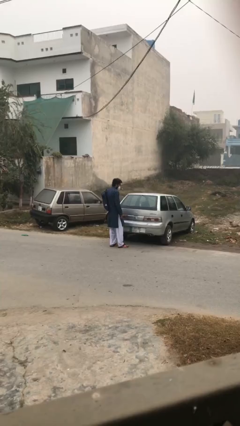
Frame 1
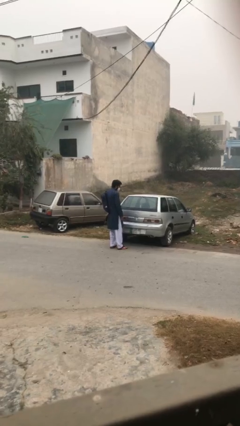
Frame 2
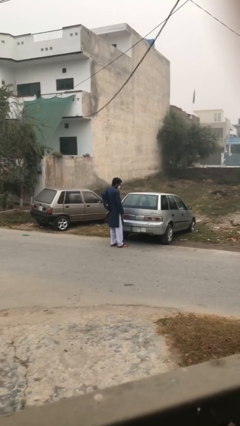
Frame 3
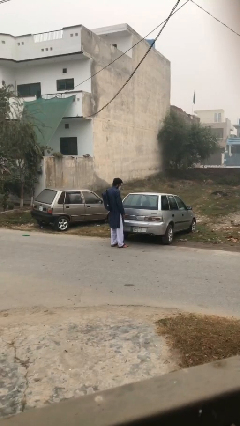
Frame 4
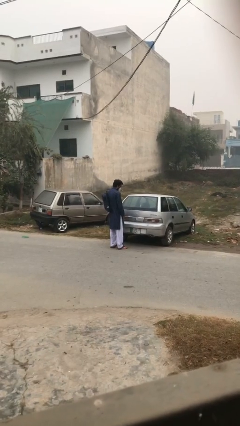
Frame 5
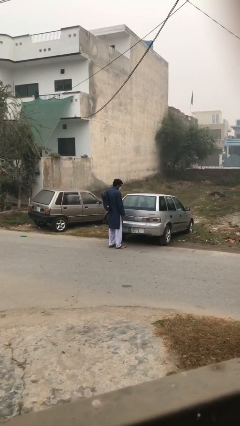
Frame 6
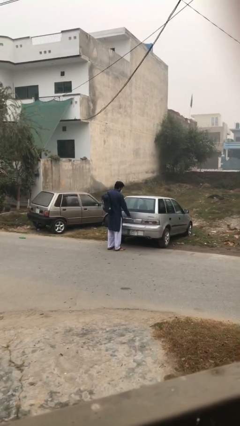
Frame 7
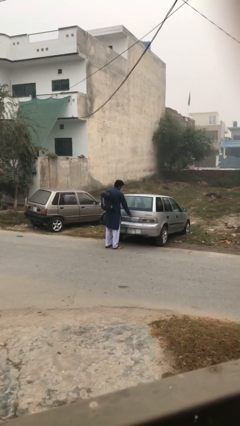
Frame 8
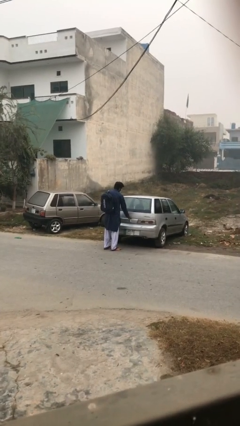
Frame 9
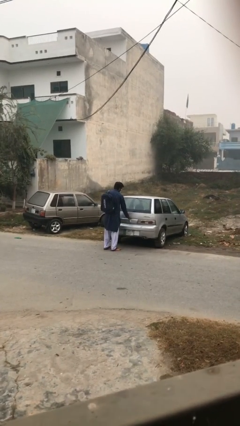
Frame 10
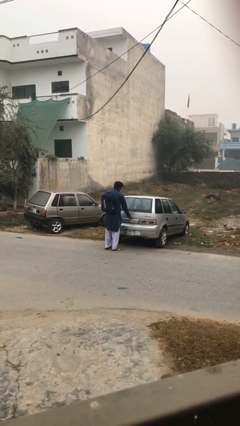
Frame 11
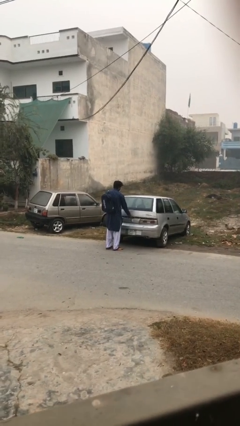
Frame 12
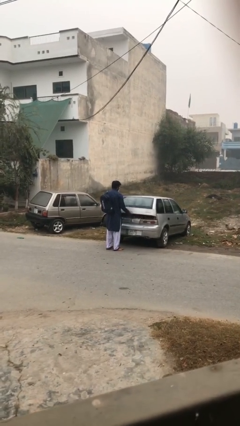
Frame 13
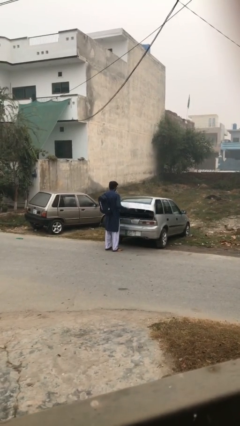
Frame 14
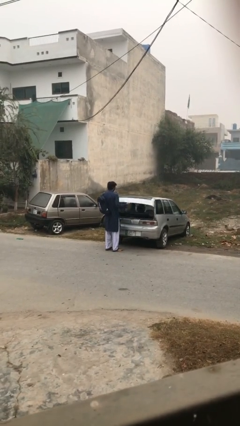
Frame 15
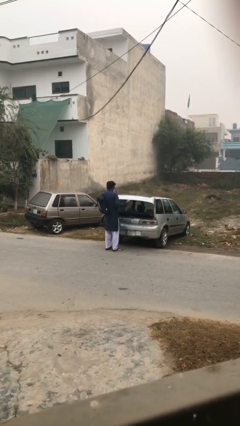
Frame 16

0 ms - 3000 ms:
person opens car trunk

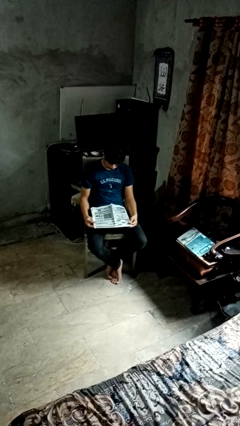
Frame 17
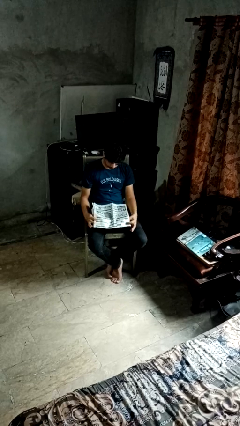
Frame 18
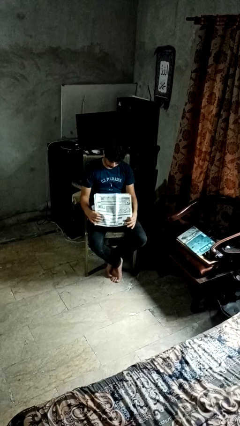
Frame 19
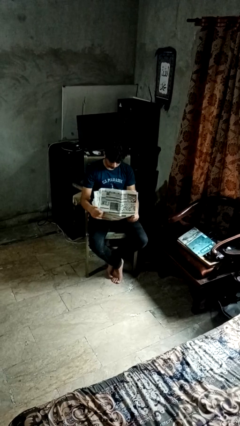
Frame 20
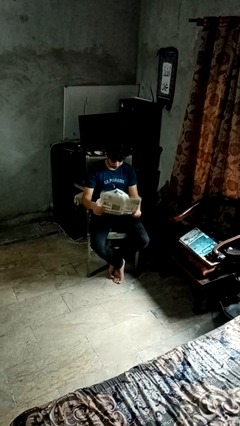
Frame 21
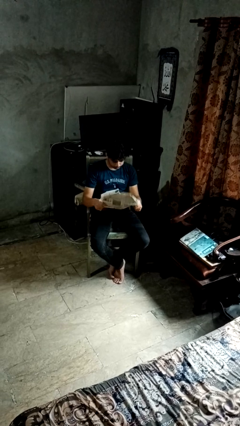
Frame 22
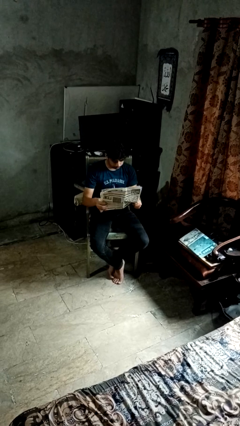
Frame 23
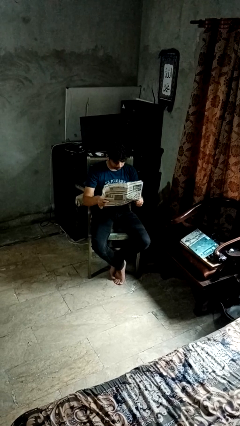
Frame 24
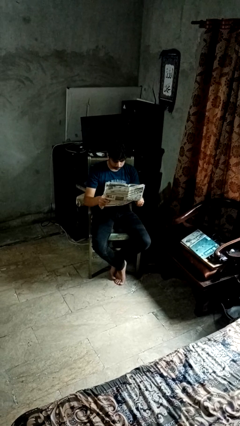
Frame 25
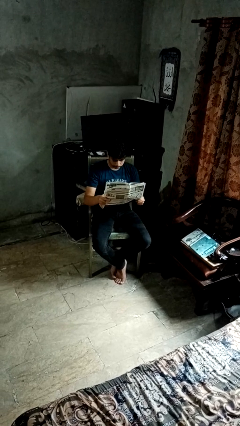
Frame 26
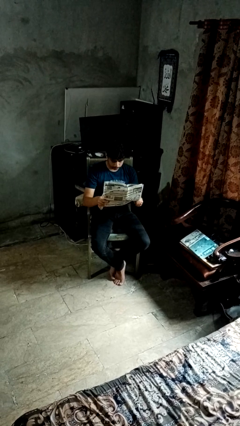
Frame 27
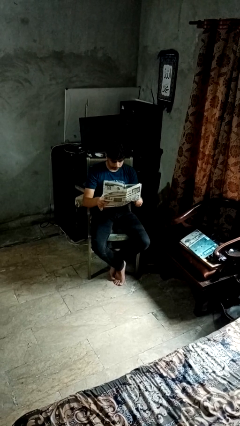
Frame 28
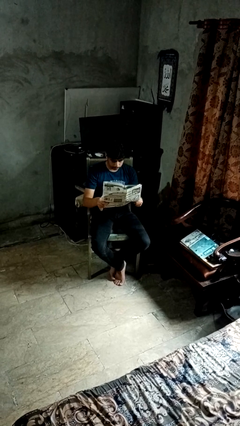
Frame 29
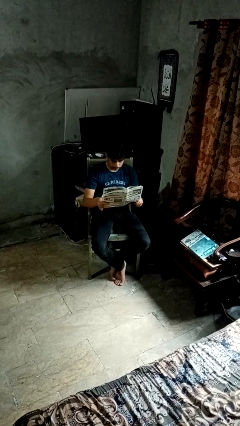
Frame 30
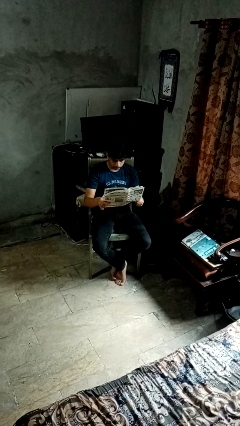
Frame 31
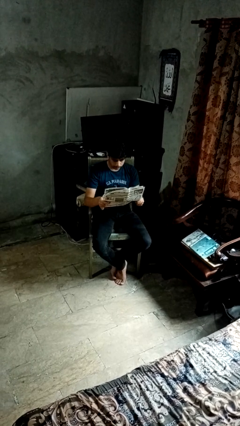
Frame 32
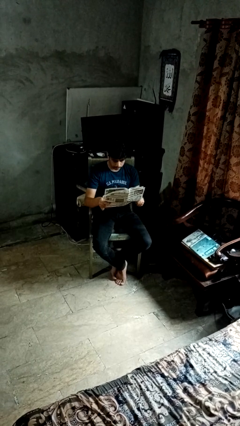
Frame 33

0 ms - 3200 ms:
person reads newspaper

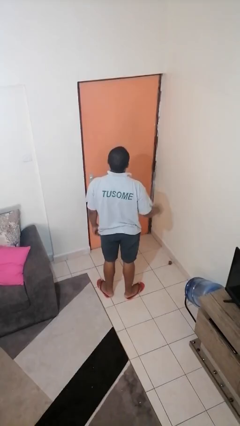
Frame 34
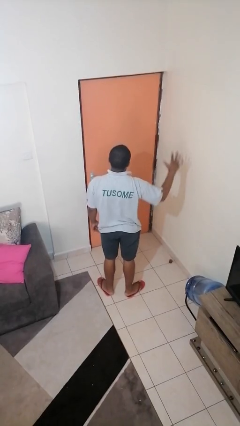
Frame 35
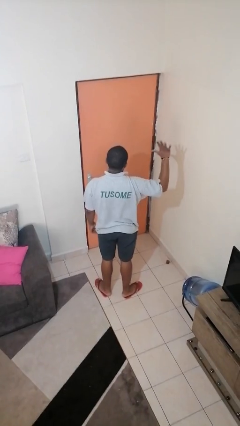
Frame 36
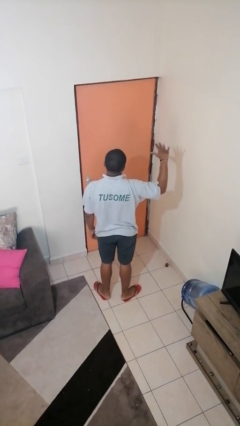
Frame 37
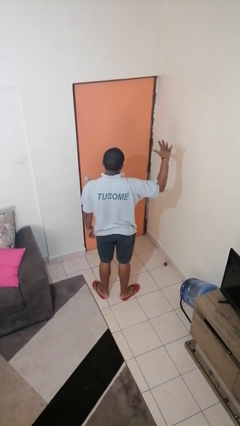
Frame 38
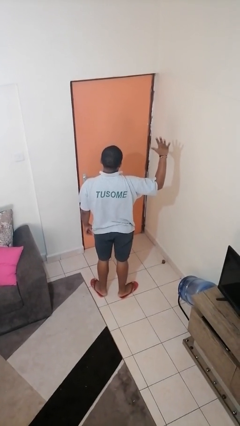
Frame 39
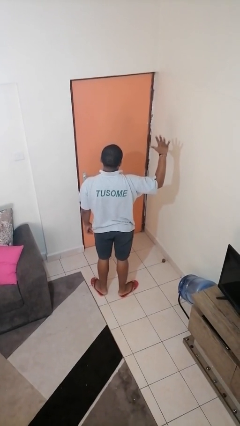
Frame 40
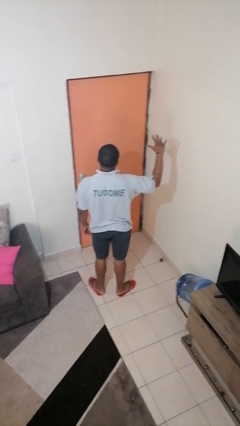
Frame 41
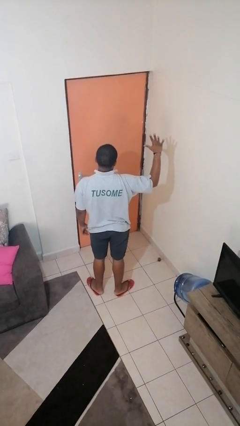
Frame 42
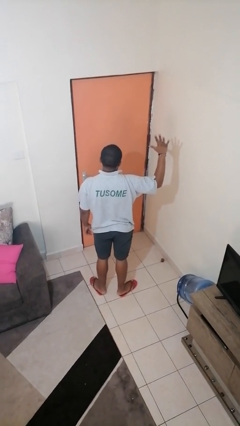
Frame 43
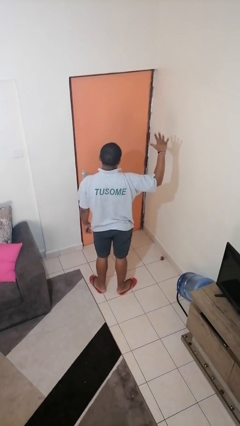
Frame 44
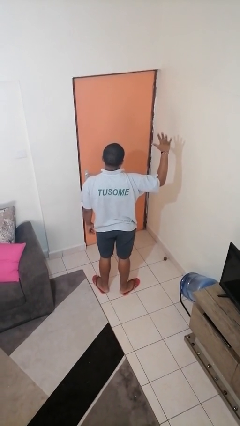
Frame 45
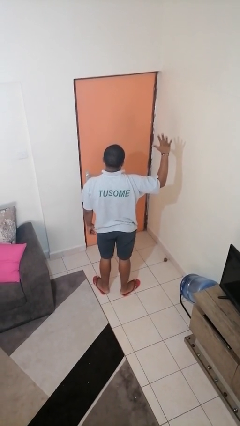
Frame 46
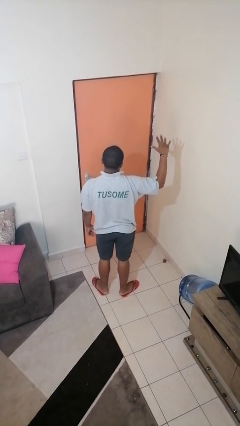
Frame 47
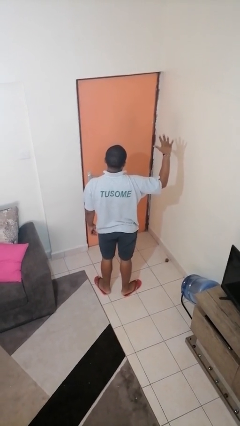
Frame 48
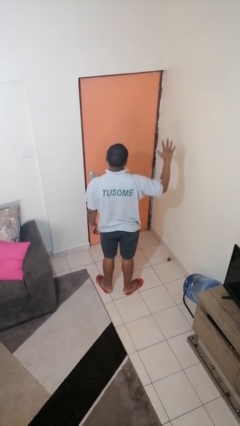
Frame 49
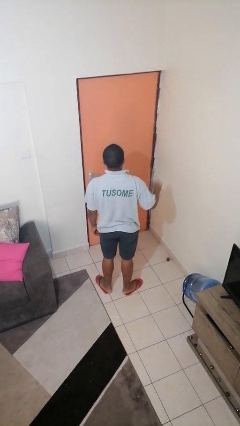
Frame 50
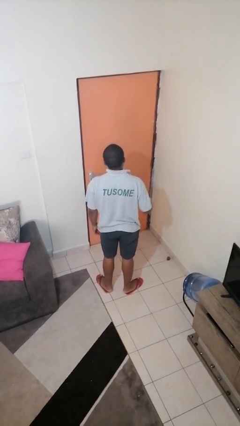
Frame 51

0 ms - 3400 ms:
person gestures number five

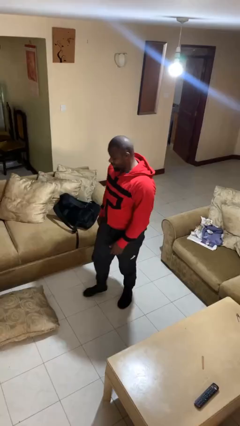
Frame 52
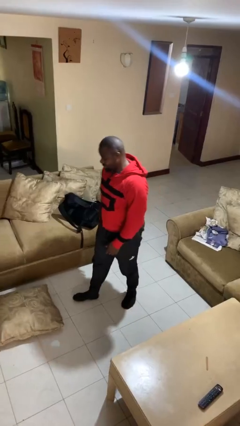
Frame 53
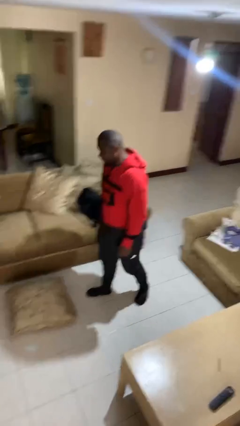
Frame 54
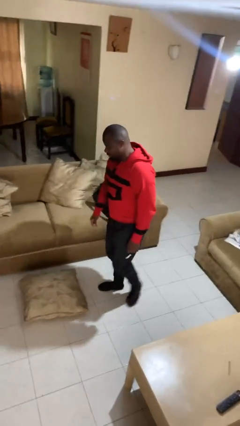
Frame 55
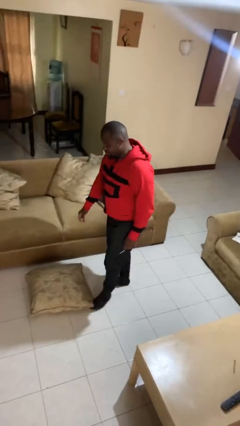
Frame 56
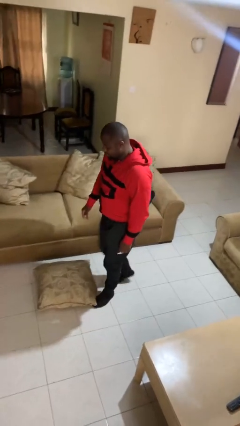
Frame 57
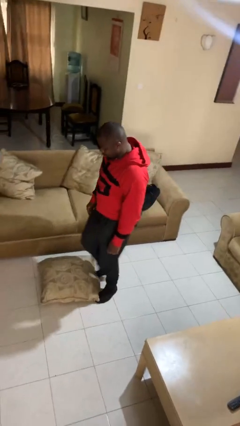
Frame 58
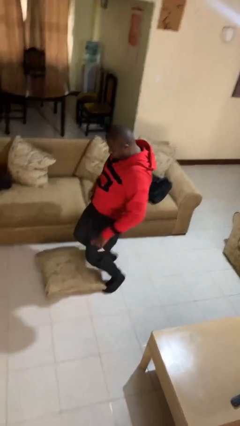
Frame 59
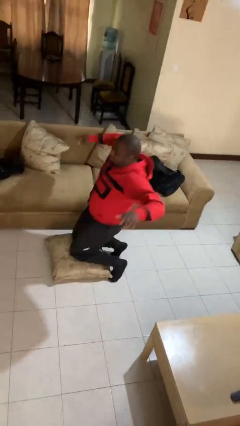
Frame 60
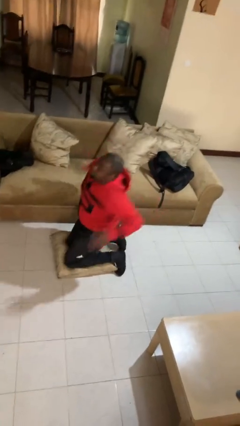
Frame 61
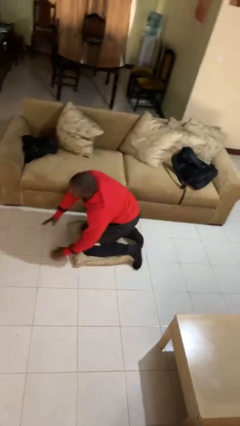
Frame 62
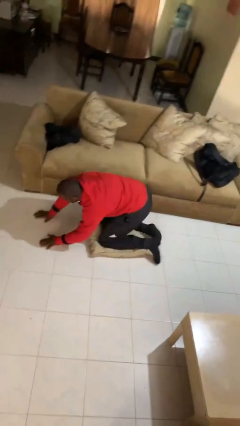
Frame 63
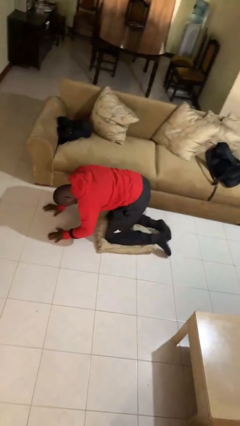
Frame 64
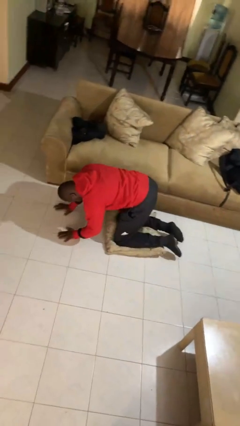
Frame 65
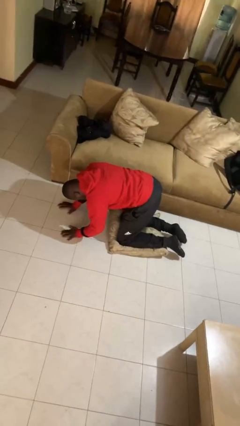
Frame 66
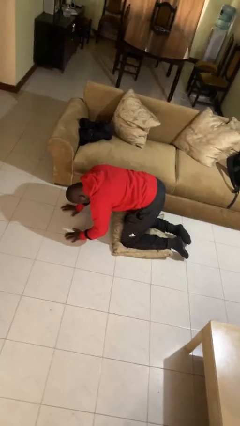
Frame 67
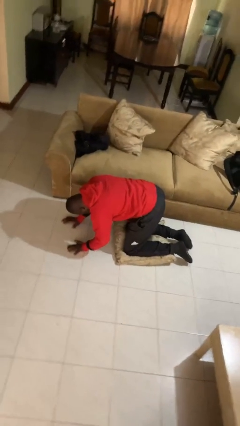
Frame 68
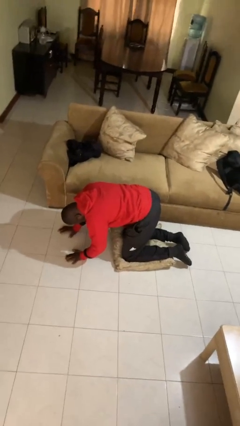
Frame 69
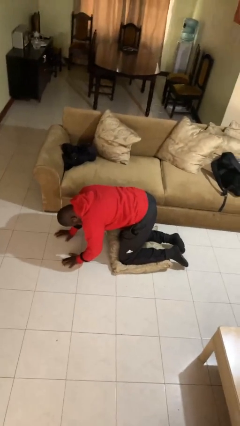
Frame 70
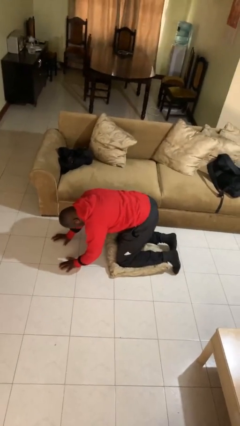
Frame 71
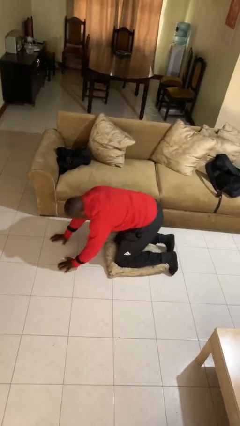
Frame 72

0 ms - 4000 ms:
person trips on object on floor

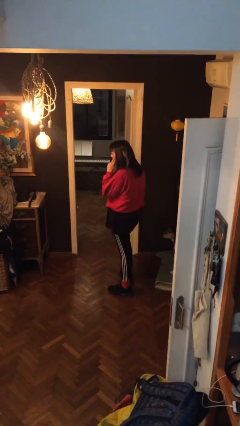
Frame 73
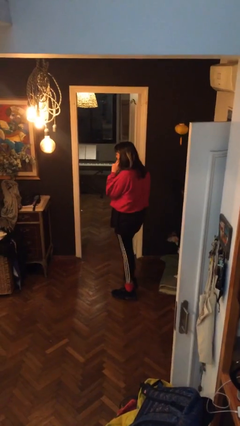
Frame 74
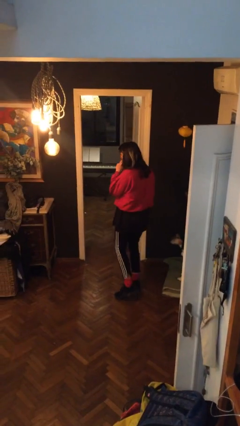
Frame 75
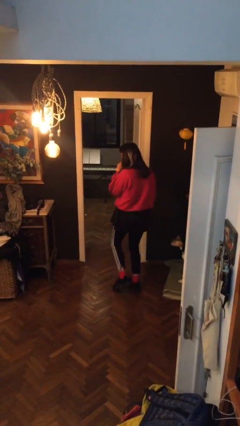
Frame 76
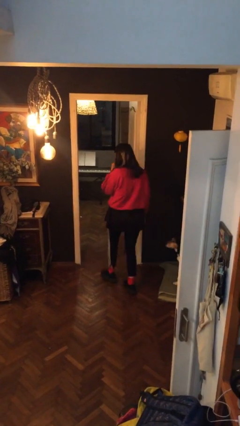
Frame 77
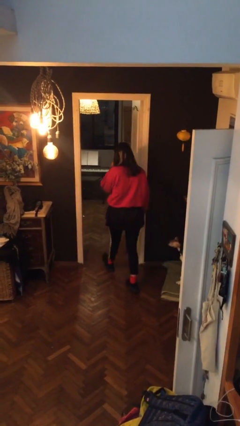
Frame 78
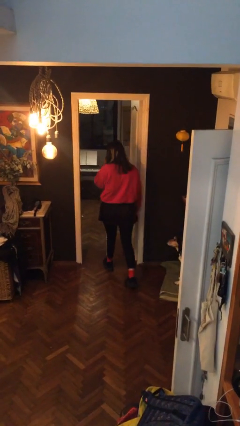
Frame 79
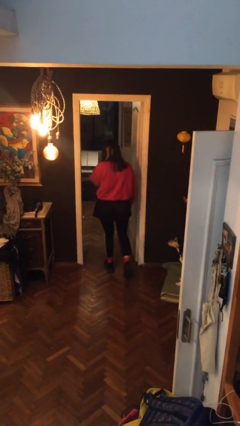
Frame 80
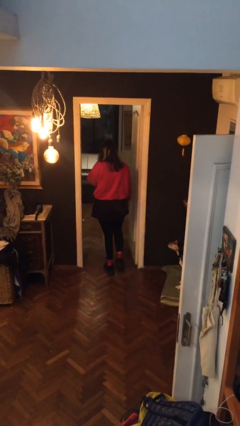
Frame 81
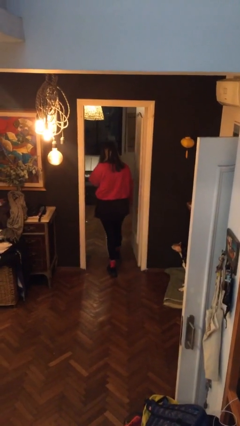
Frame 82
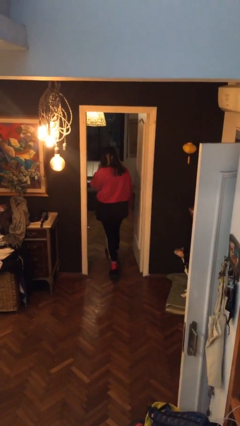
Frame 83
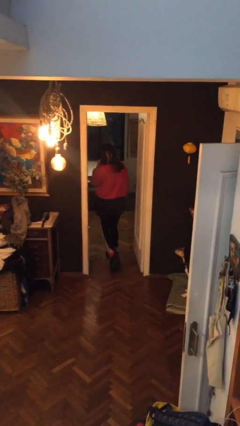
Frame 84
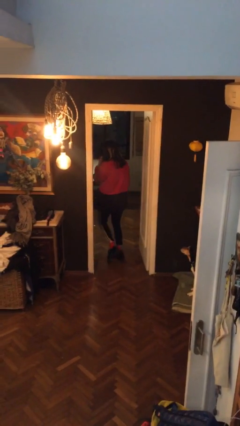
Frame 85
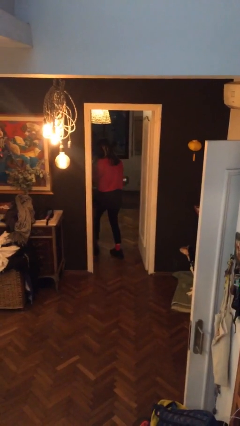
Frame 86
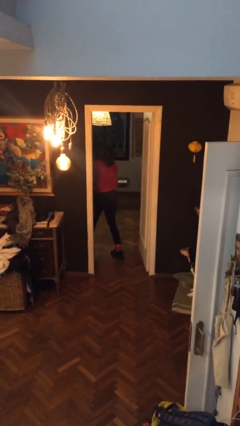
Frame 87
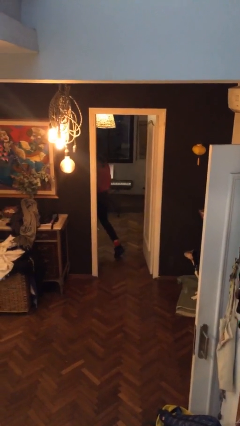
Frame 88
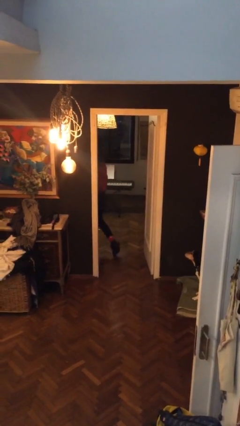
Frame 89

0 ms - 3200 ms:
person exits scene through structure

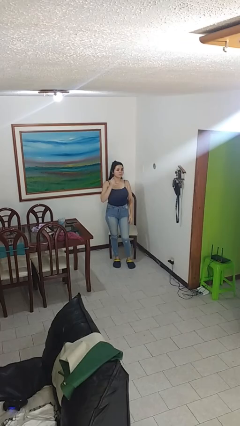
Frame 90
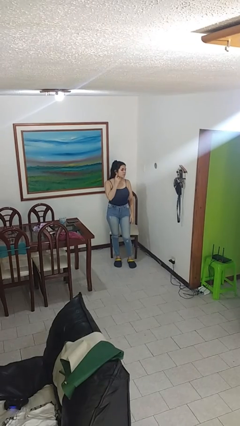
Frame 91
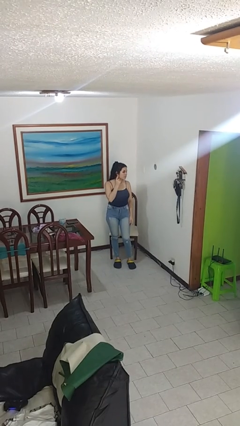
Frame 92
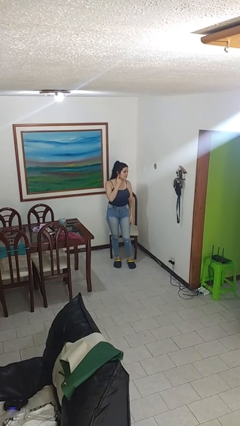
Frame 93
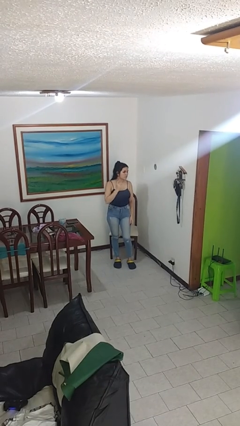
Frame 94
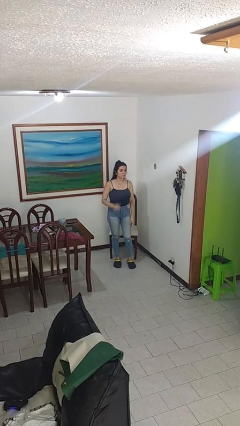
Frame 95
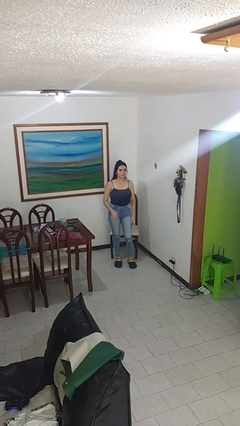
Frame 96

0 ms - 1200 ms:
person gestures listen closely
